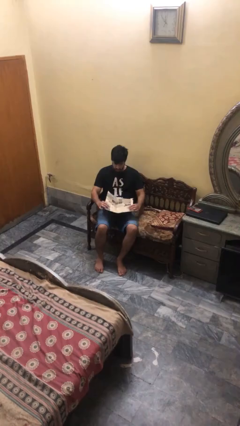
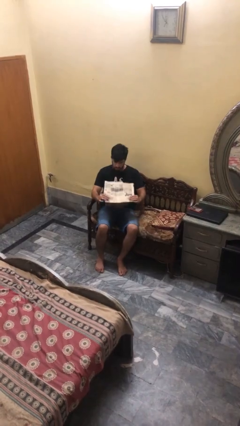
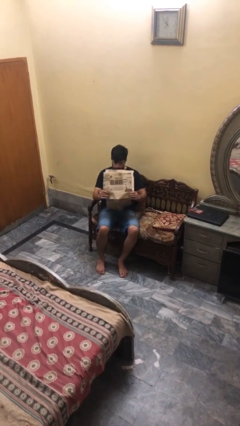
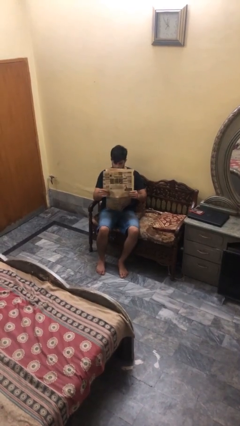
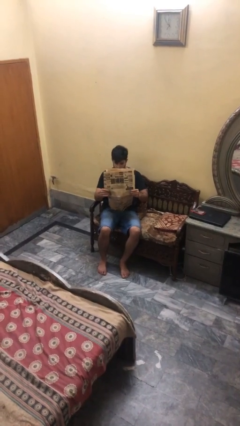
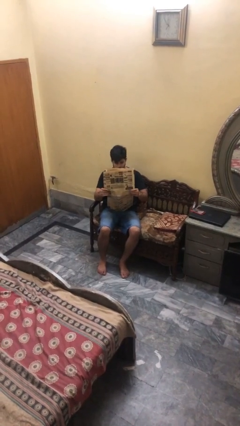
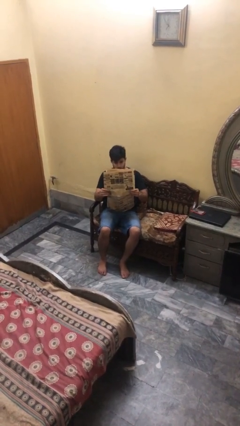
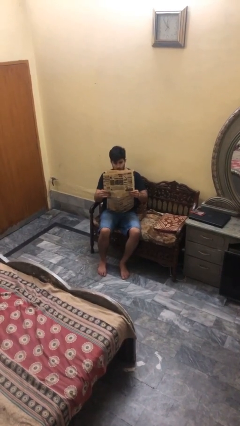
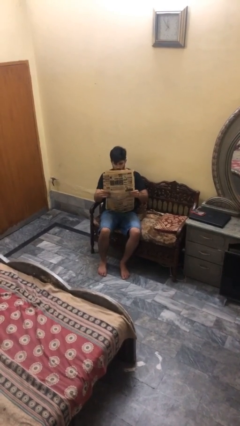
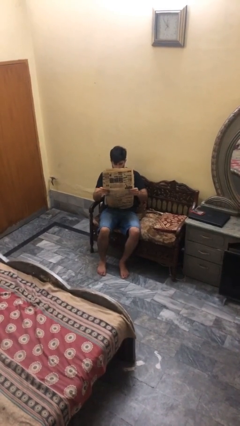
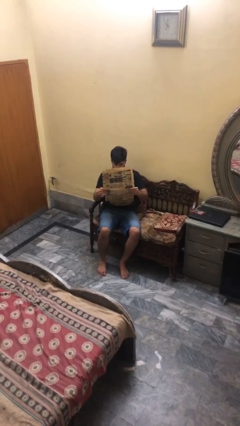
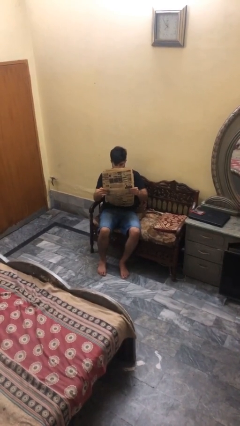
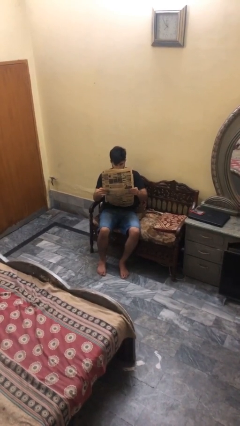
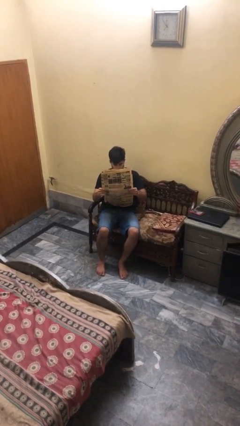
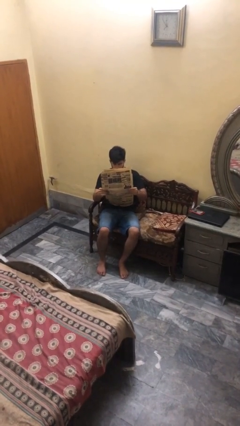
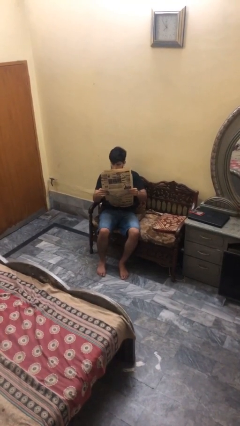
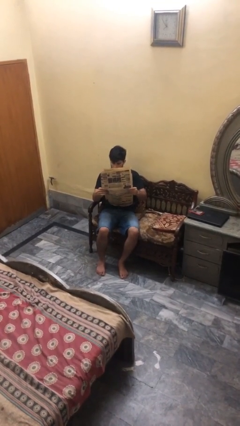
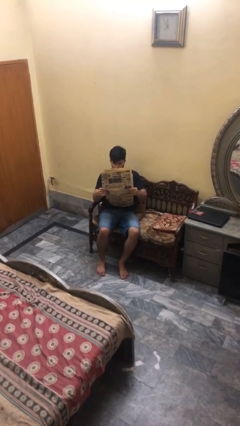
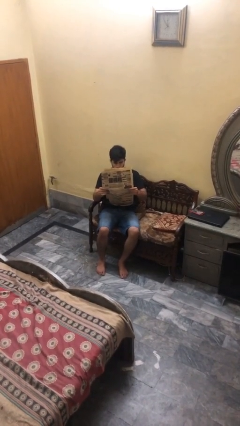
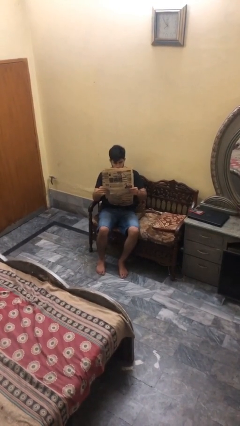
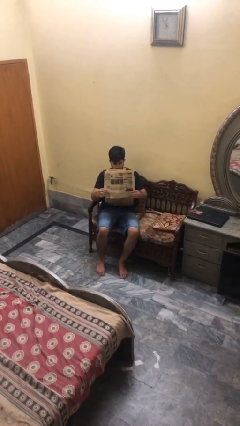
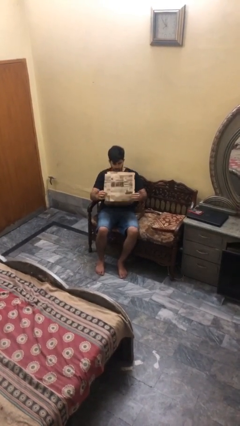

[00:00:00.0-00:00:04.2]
person reads newspaper

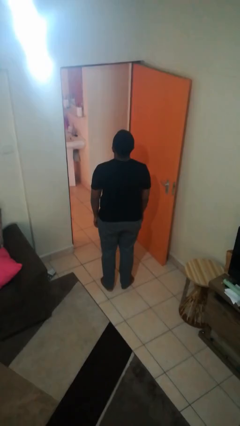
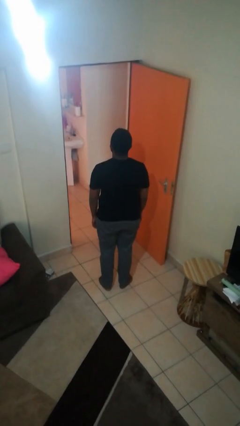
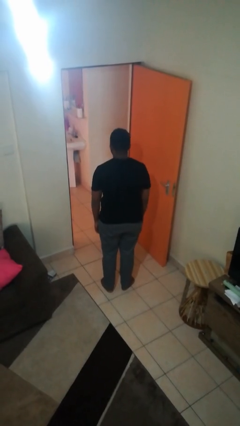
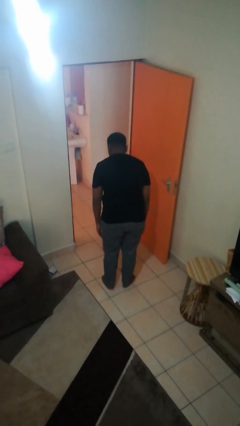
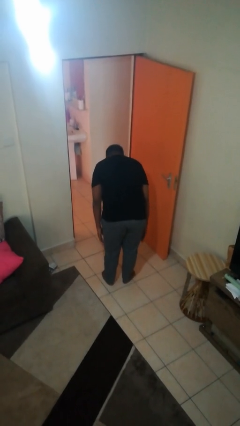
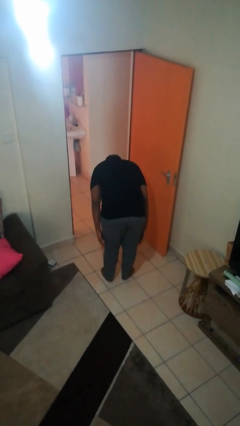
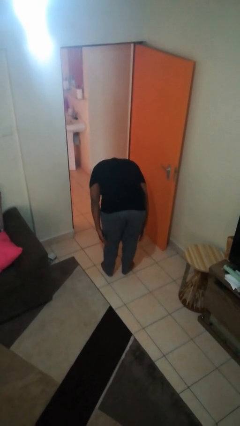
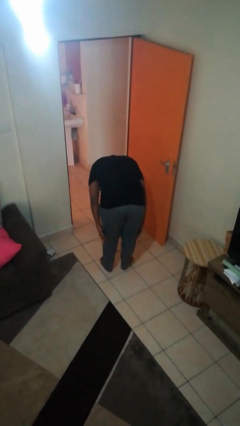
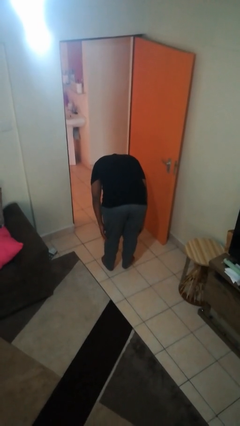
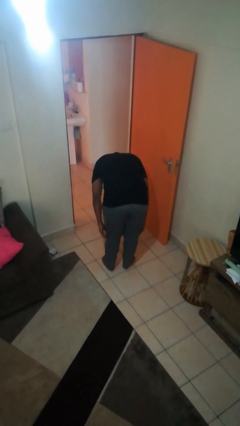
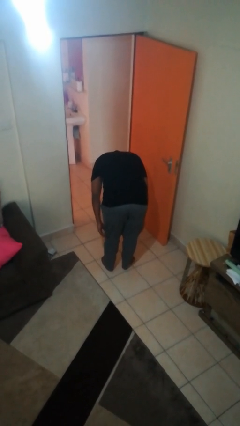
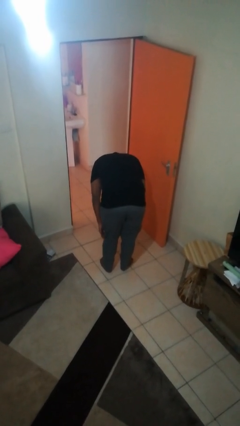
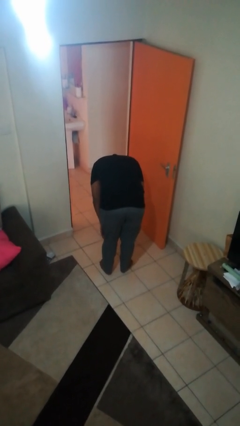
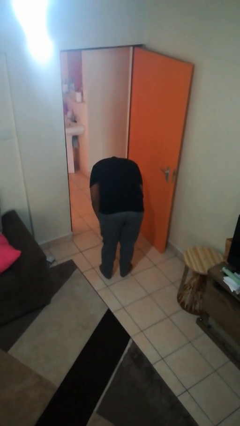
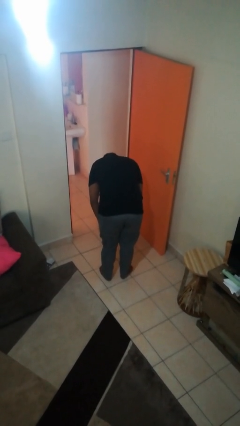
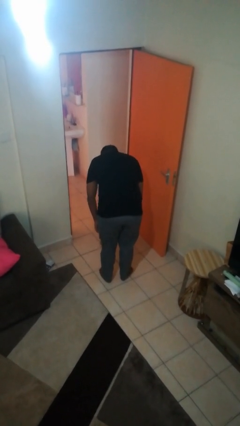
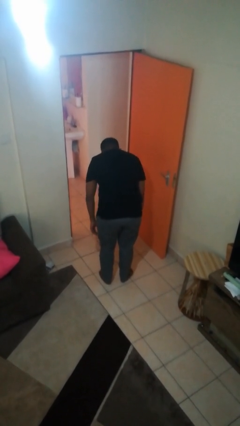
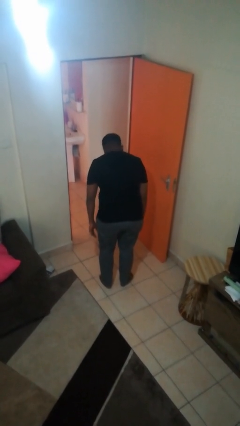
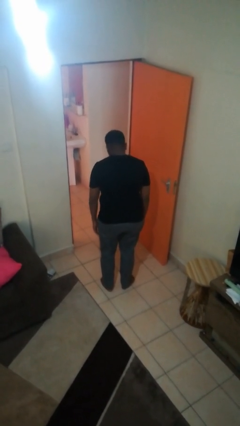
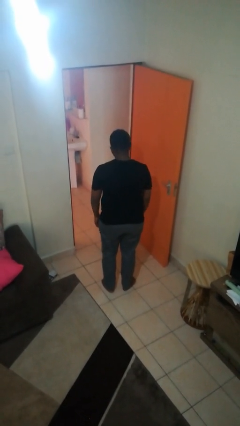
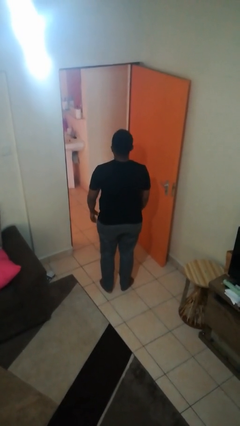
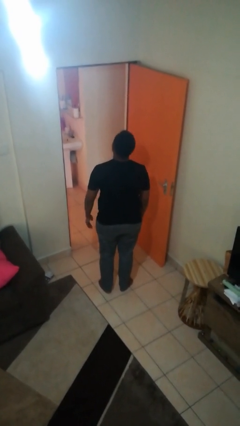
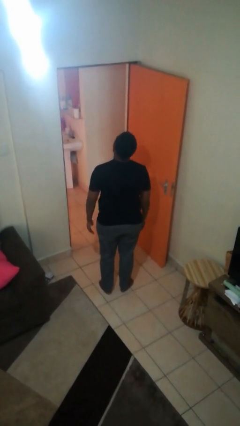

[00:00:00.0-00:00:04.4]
person bows

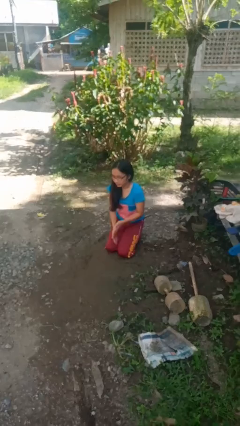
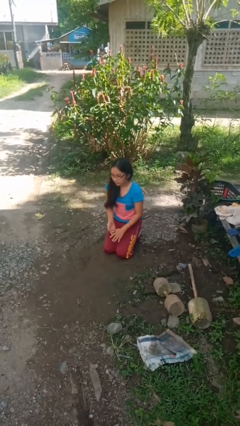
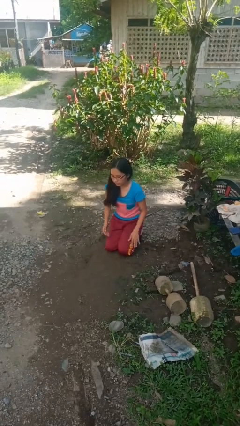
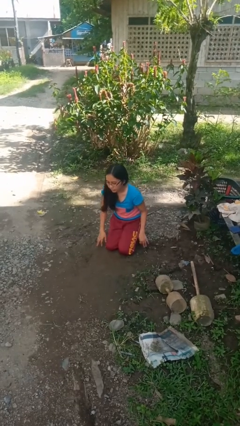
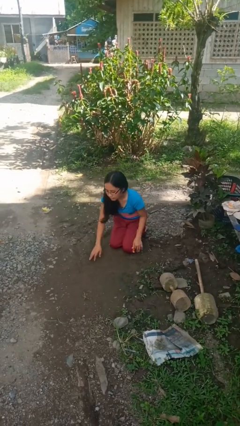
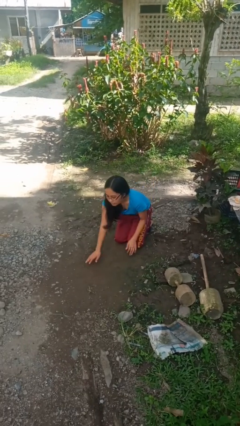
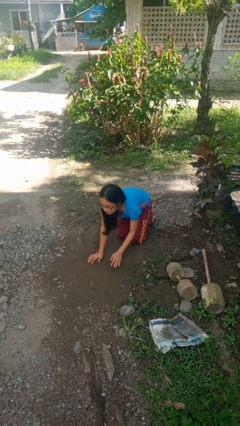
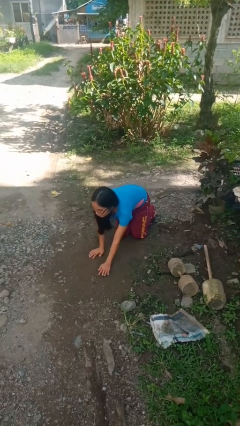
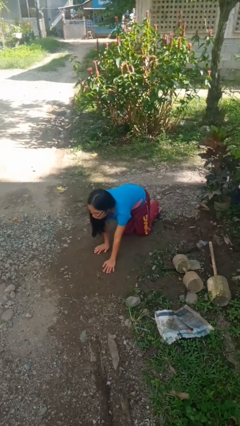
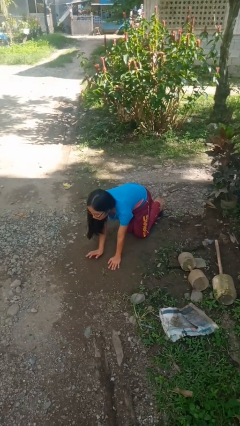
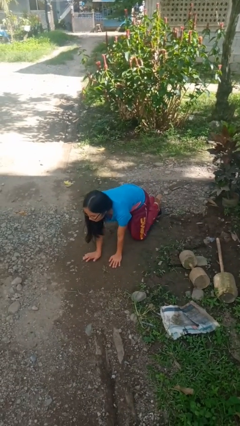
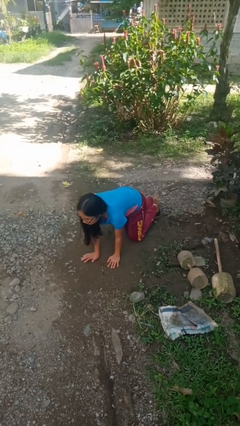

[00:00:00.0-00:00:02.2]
person crawls

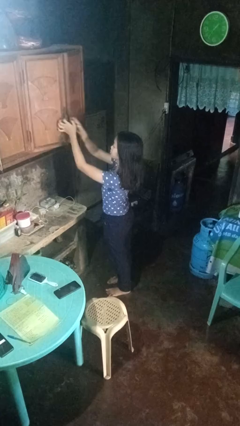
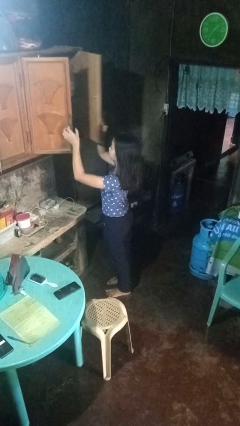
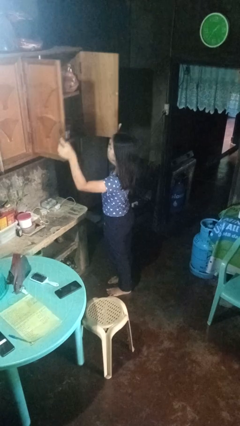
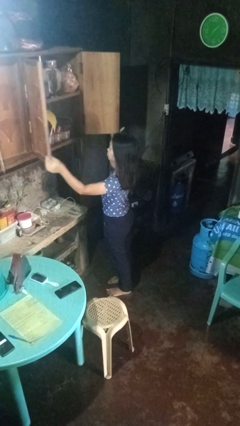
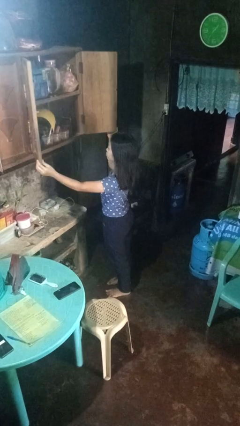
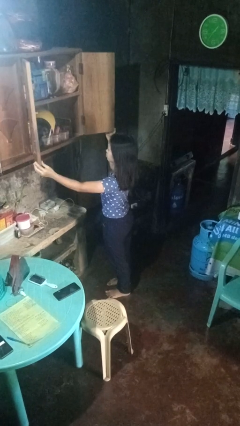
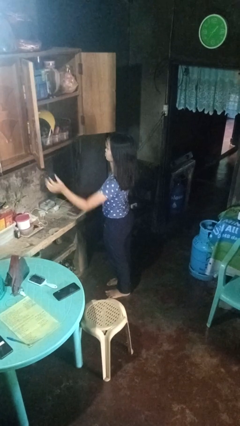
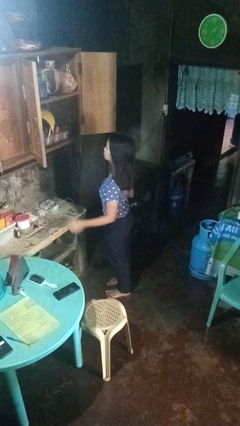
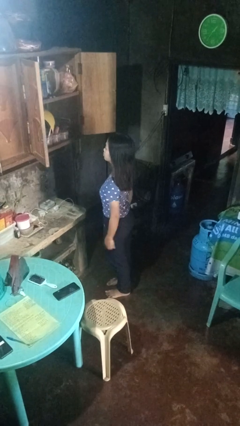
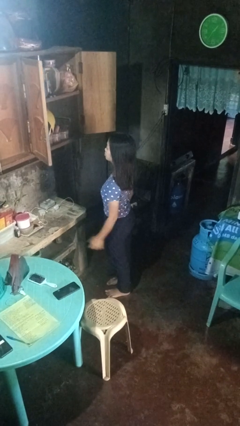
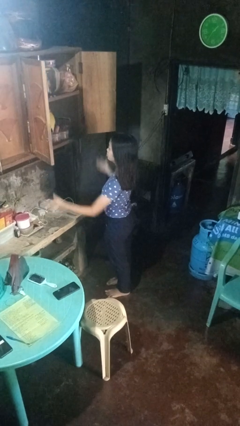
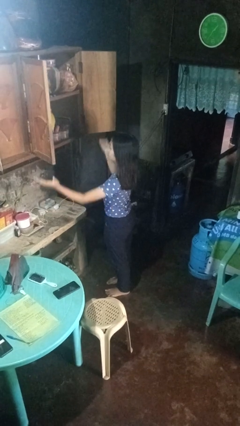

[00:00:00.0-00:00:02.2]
person opens cabinet

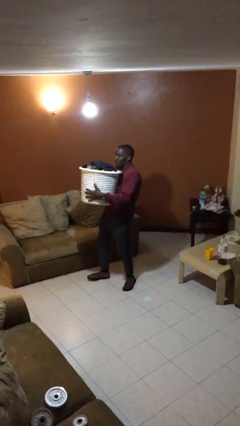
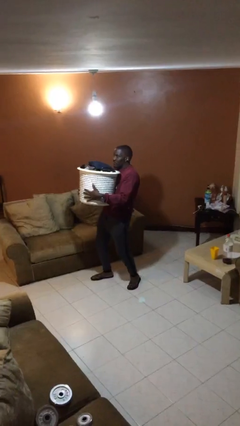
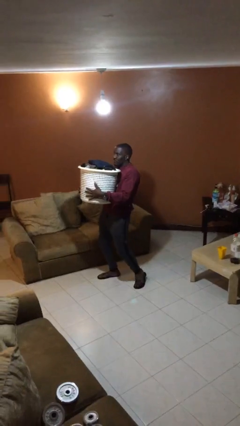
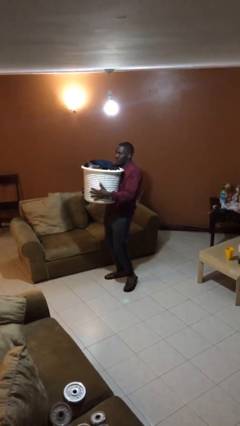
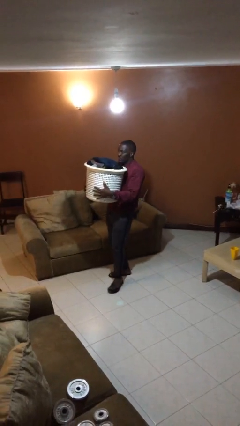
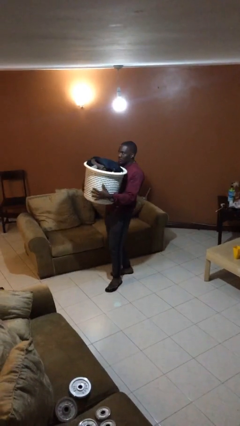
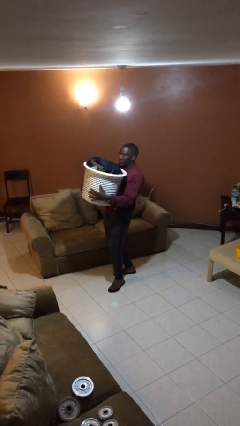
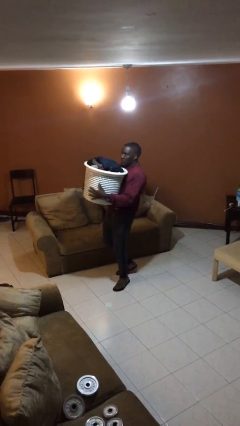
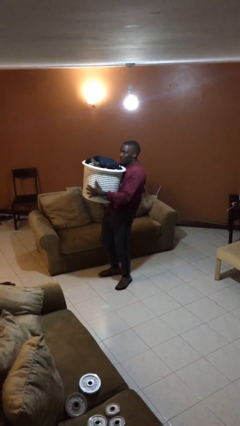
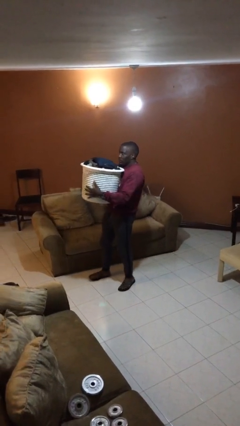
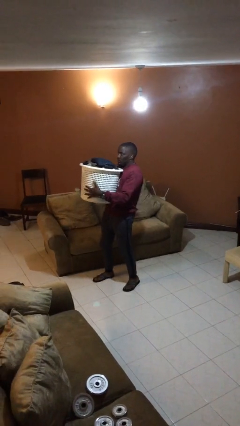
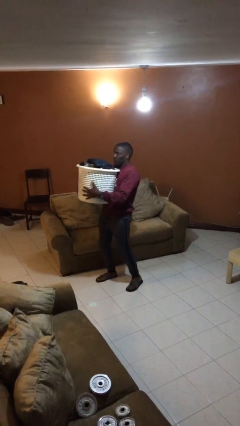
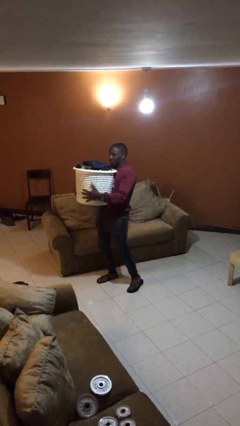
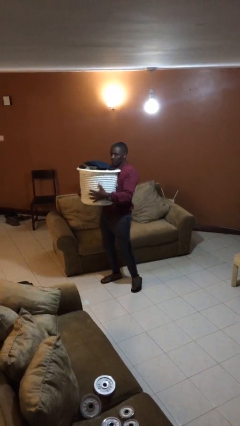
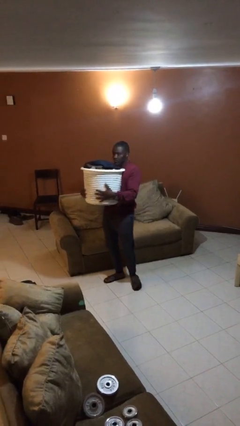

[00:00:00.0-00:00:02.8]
person carries laundry basket

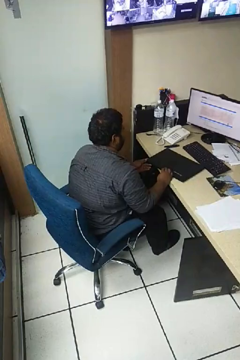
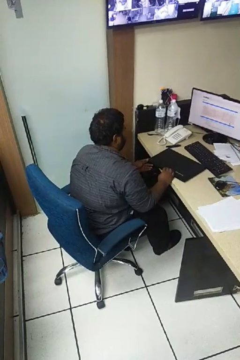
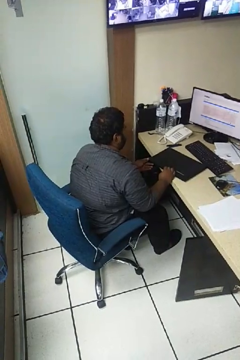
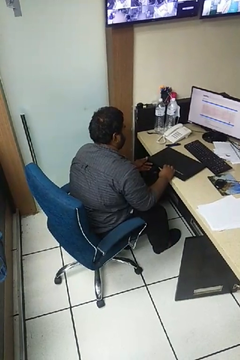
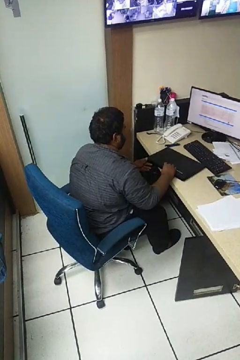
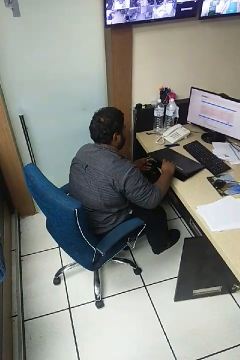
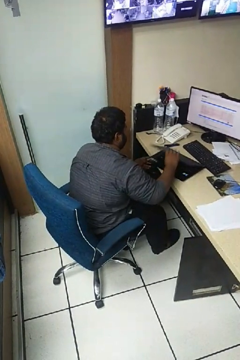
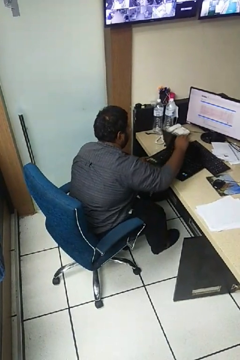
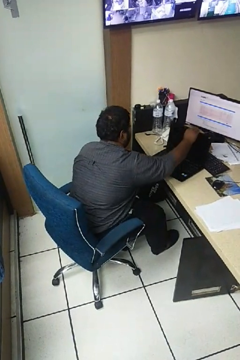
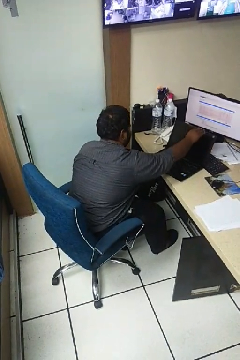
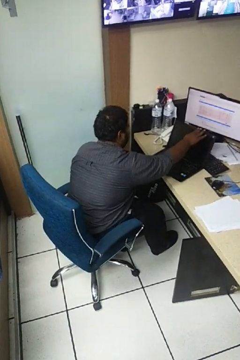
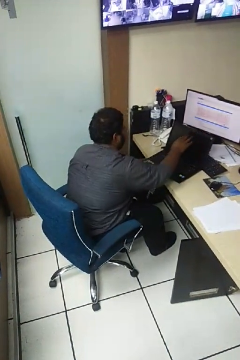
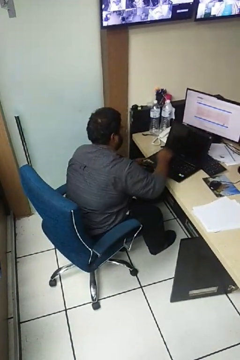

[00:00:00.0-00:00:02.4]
person opens laptop
